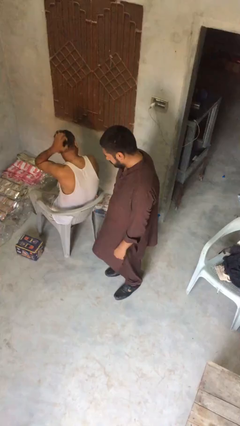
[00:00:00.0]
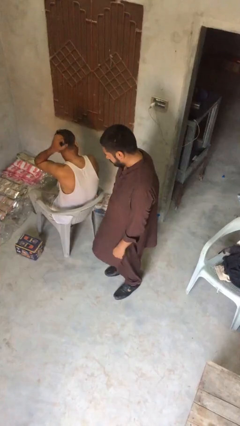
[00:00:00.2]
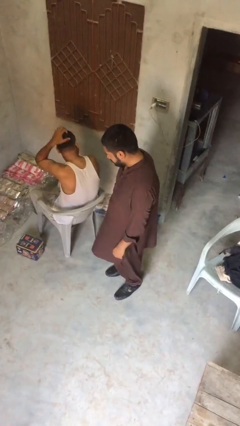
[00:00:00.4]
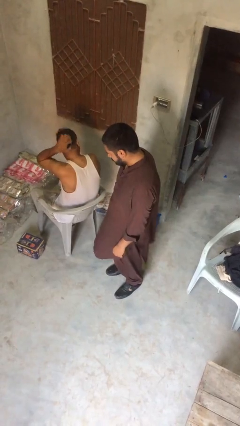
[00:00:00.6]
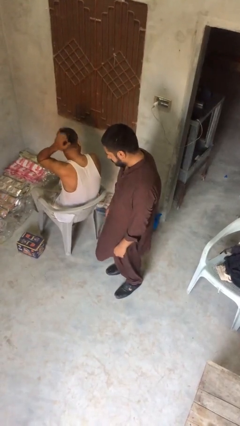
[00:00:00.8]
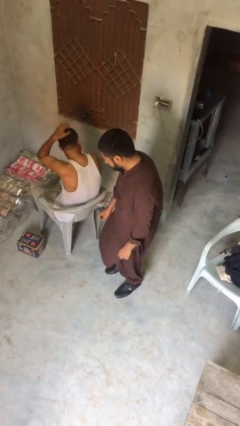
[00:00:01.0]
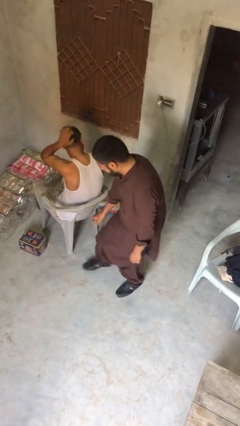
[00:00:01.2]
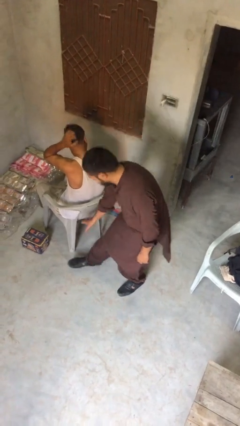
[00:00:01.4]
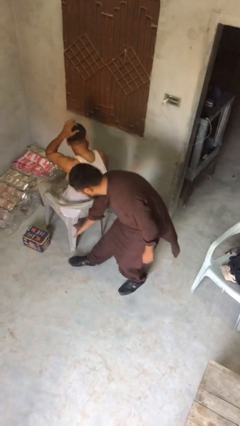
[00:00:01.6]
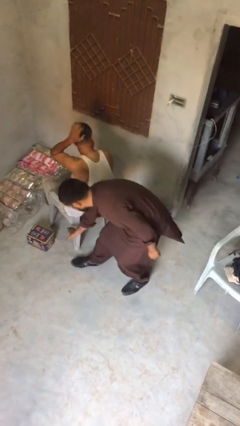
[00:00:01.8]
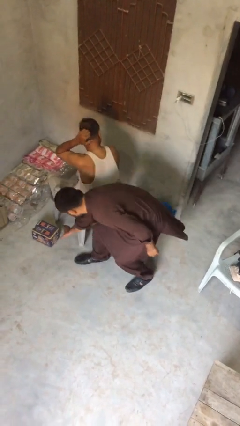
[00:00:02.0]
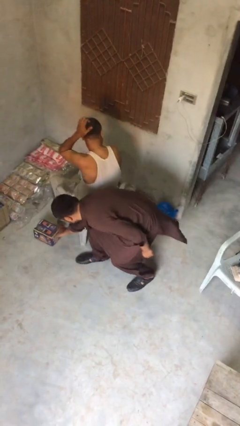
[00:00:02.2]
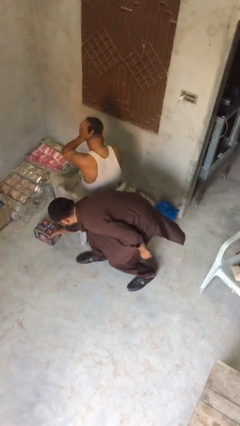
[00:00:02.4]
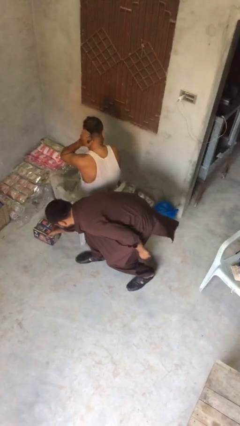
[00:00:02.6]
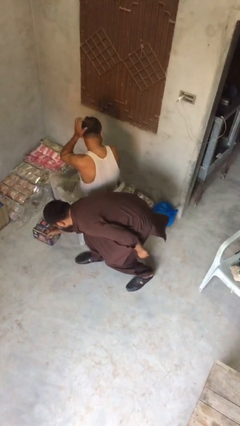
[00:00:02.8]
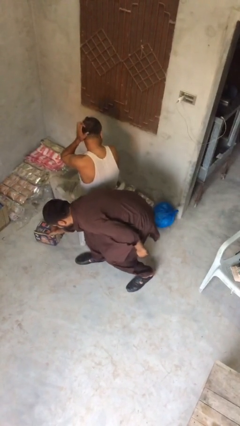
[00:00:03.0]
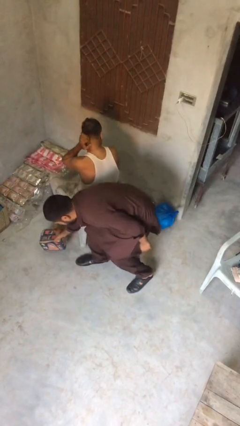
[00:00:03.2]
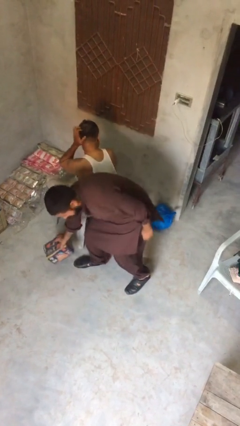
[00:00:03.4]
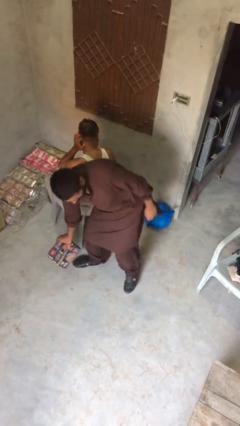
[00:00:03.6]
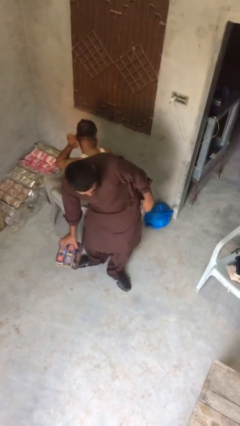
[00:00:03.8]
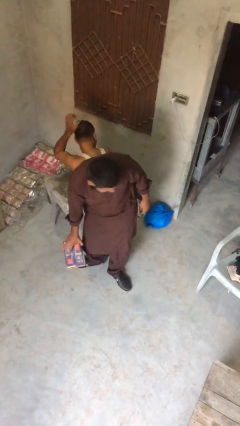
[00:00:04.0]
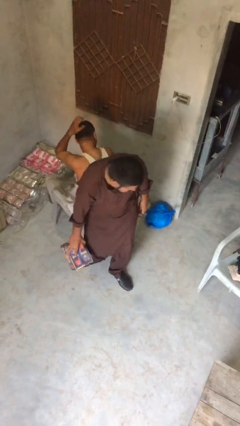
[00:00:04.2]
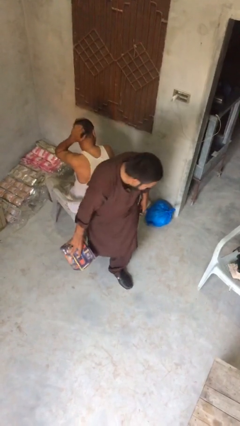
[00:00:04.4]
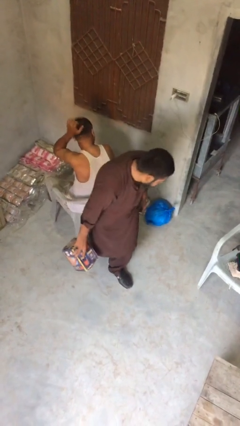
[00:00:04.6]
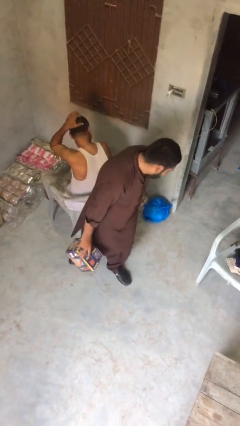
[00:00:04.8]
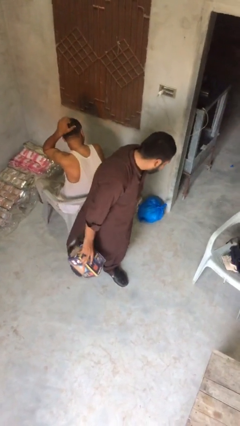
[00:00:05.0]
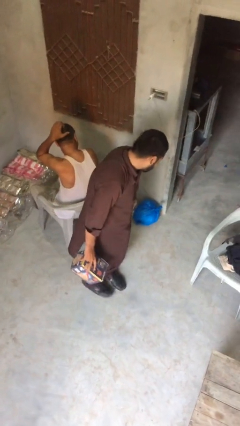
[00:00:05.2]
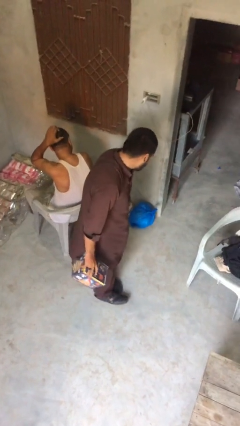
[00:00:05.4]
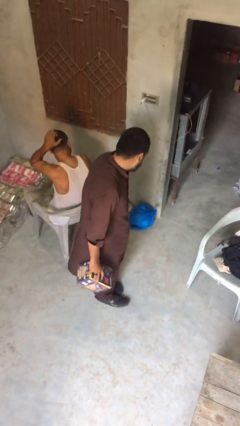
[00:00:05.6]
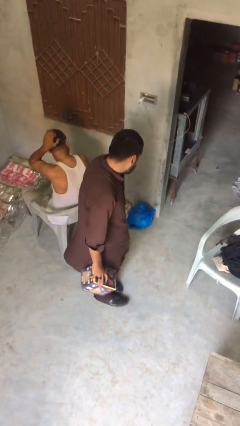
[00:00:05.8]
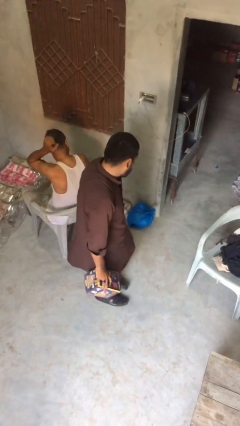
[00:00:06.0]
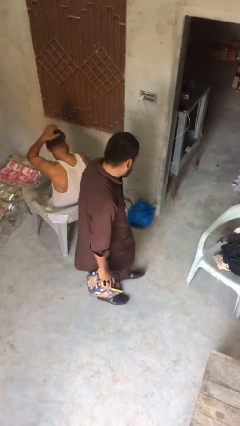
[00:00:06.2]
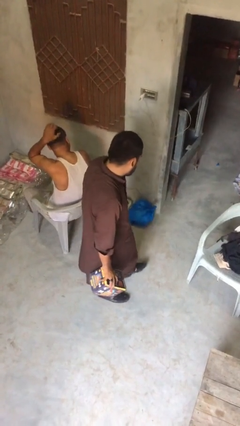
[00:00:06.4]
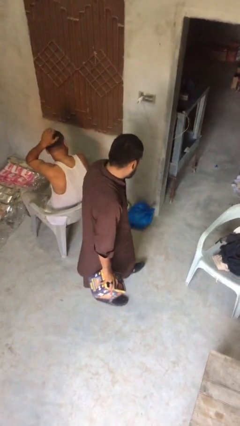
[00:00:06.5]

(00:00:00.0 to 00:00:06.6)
person steals object from person

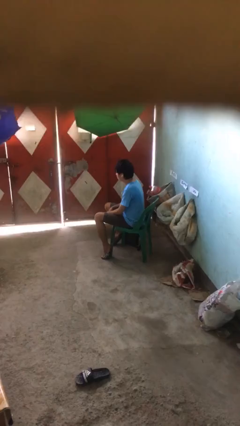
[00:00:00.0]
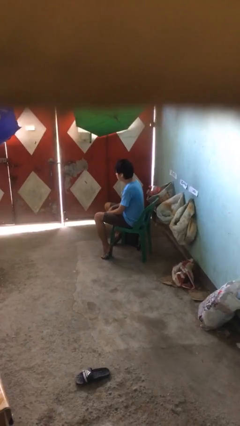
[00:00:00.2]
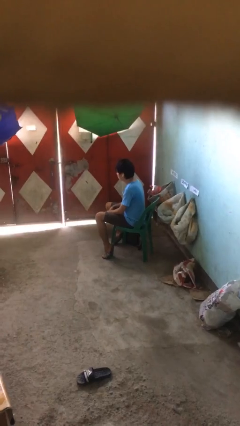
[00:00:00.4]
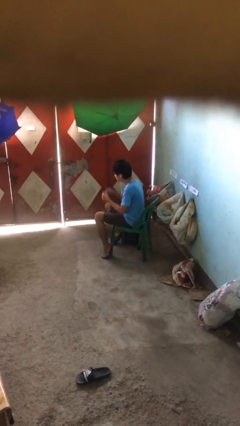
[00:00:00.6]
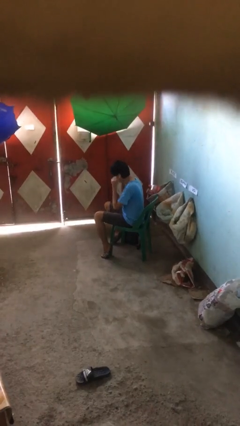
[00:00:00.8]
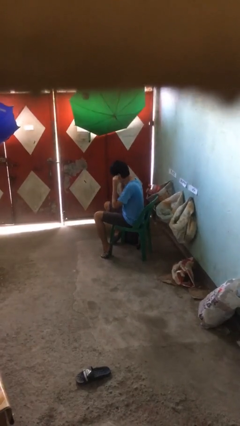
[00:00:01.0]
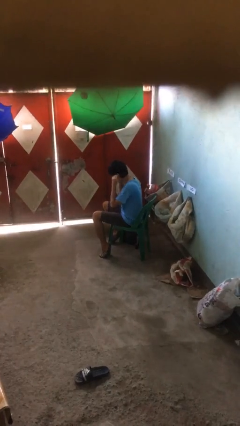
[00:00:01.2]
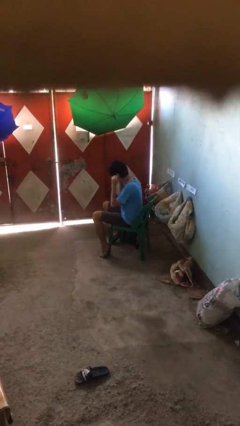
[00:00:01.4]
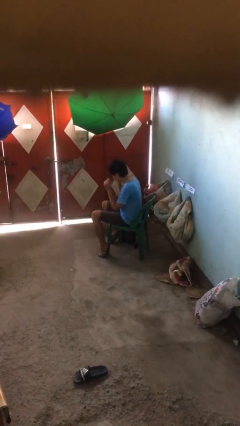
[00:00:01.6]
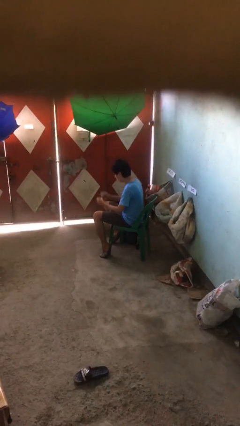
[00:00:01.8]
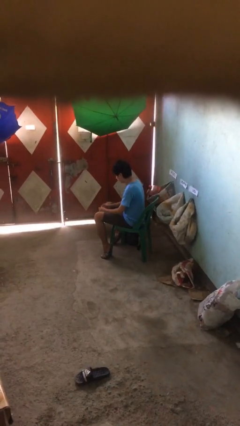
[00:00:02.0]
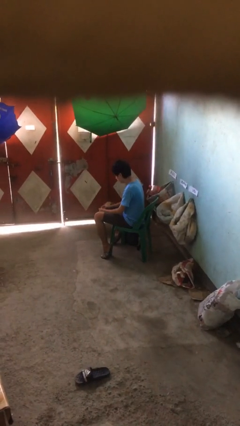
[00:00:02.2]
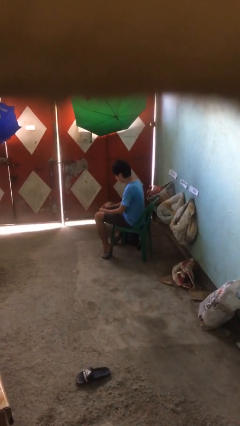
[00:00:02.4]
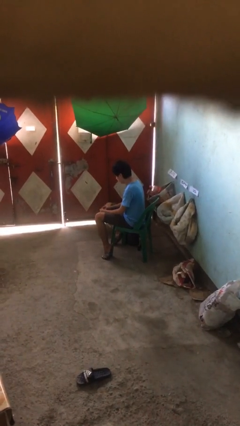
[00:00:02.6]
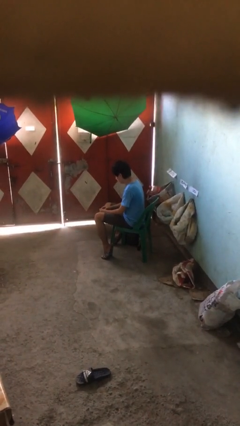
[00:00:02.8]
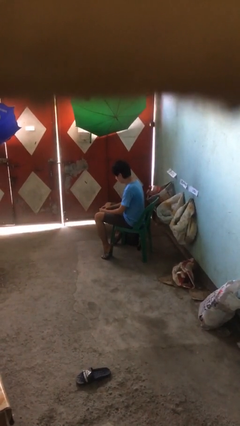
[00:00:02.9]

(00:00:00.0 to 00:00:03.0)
person takes off headphones

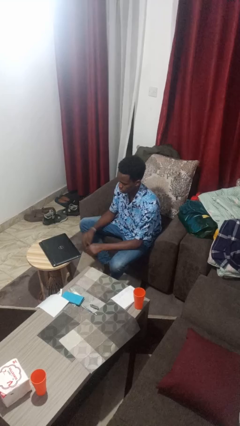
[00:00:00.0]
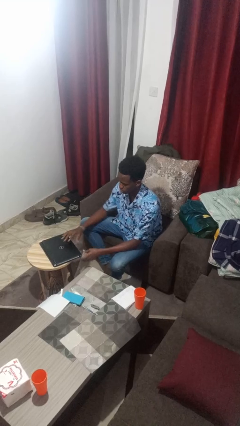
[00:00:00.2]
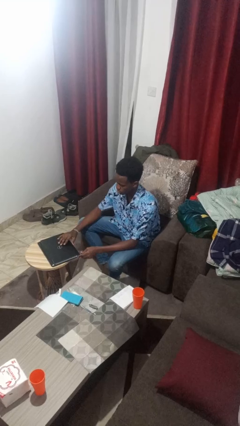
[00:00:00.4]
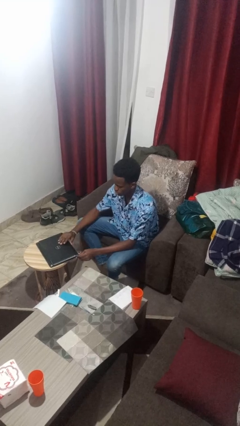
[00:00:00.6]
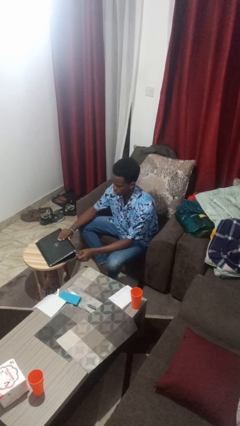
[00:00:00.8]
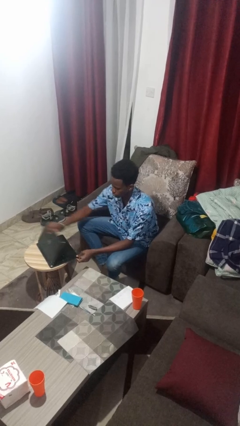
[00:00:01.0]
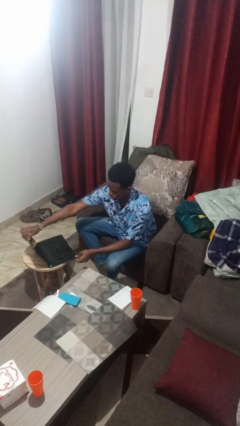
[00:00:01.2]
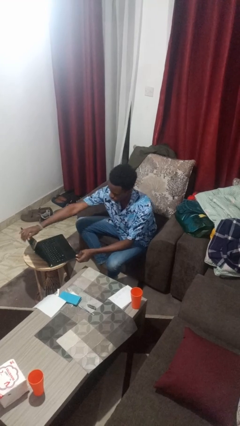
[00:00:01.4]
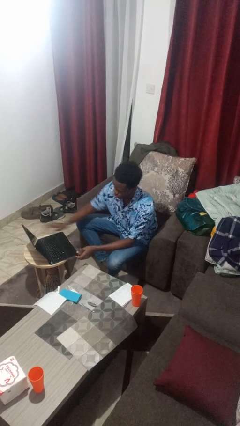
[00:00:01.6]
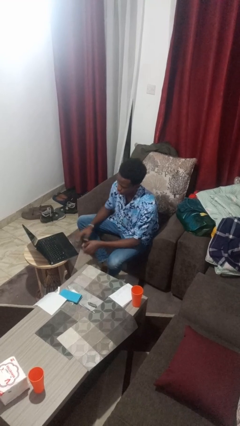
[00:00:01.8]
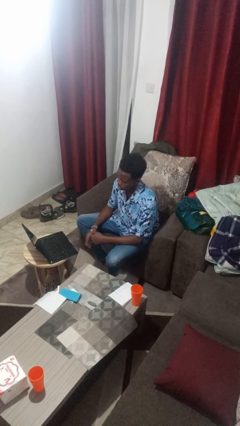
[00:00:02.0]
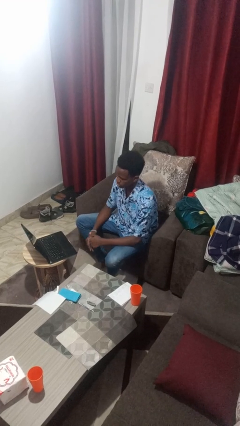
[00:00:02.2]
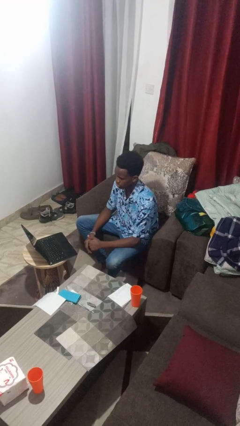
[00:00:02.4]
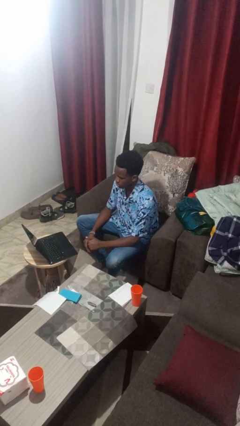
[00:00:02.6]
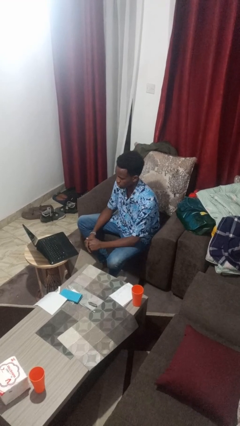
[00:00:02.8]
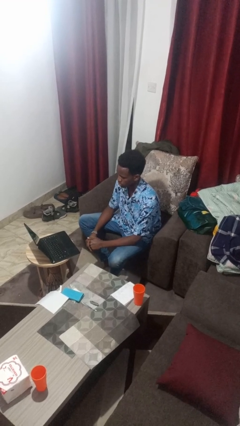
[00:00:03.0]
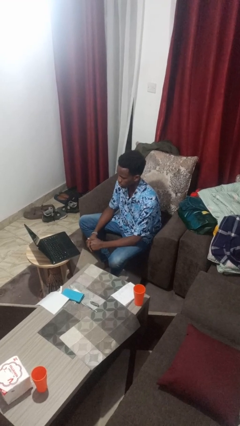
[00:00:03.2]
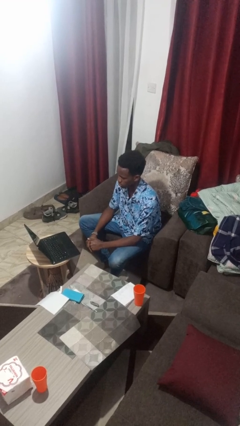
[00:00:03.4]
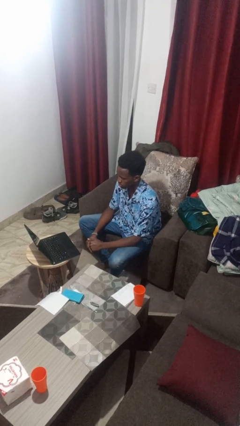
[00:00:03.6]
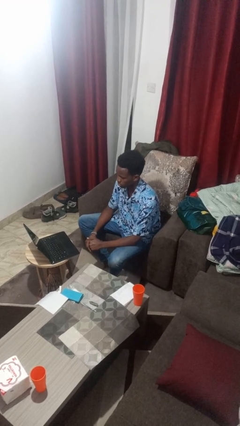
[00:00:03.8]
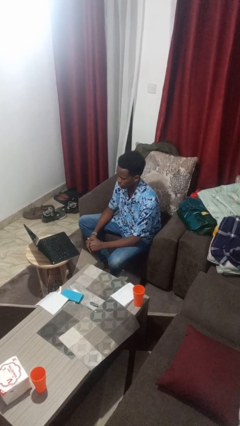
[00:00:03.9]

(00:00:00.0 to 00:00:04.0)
person opens laptop

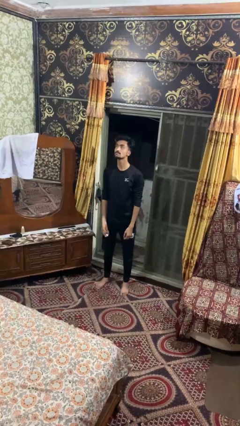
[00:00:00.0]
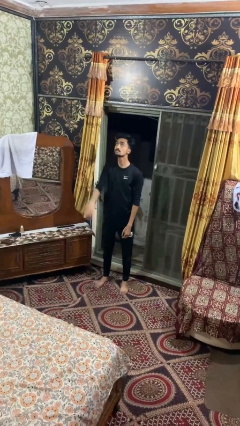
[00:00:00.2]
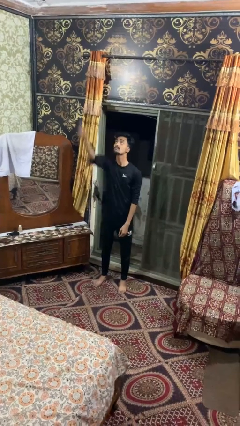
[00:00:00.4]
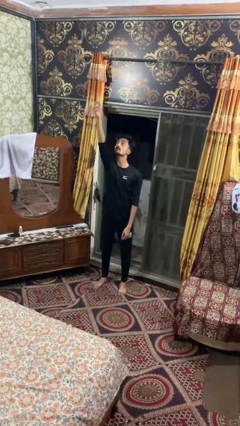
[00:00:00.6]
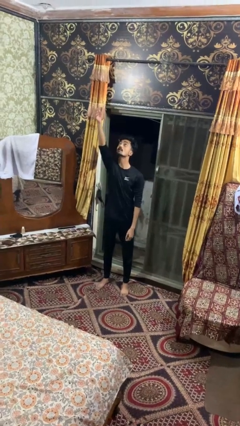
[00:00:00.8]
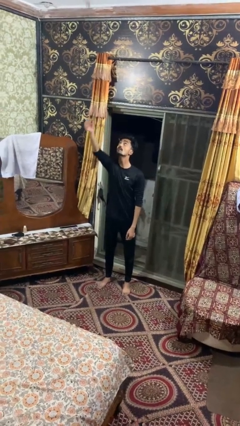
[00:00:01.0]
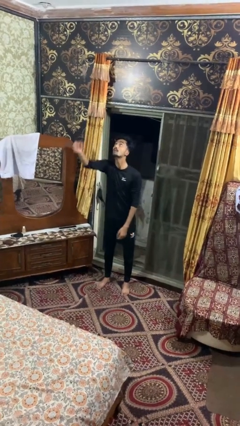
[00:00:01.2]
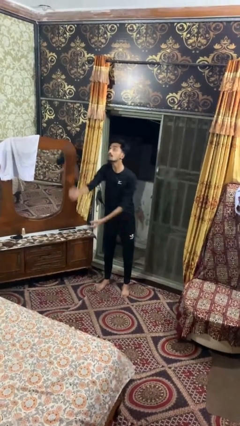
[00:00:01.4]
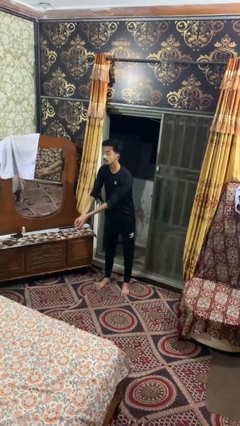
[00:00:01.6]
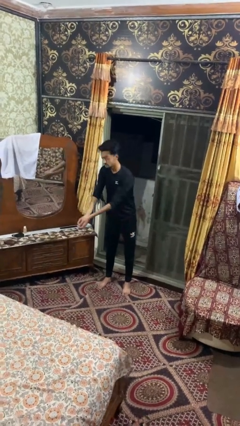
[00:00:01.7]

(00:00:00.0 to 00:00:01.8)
person drops object

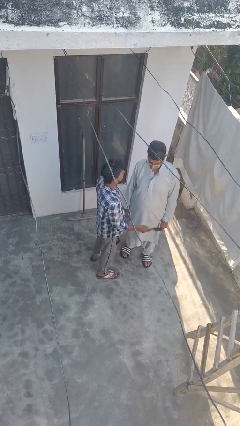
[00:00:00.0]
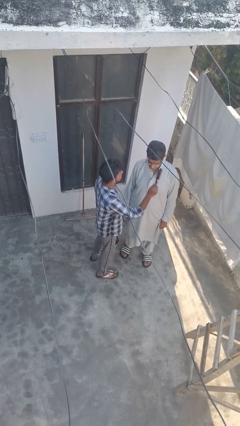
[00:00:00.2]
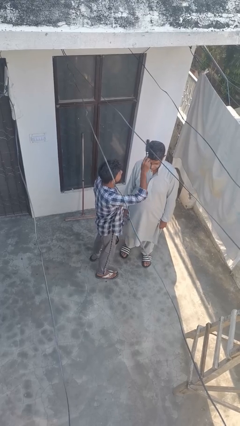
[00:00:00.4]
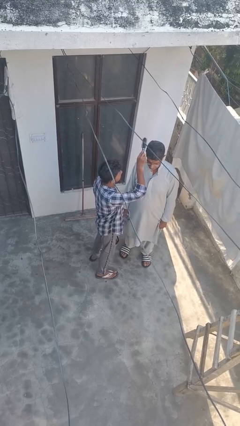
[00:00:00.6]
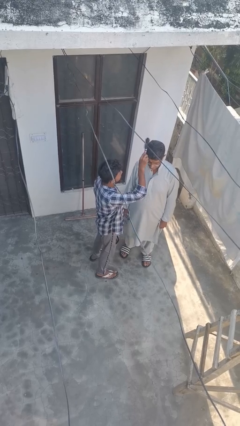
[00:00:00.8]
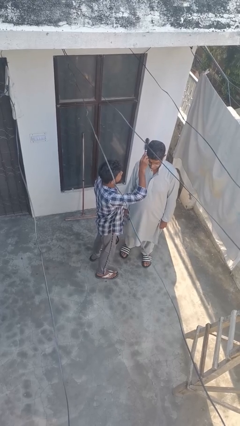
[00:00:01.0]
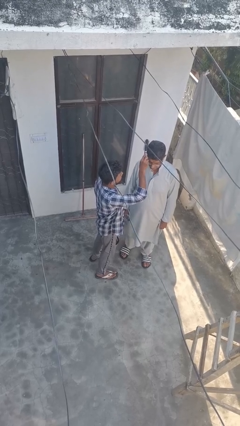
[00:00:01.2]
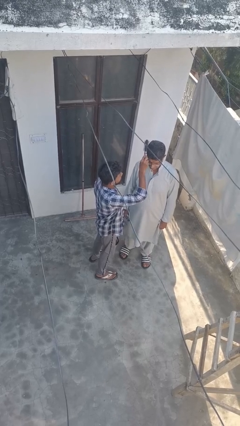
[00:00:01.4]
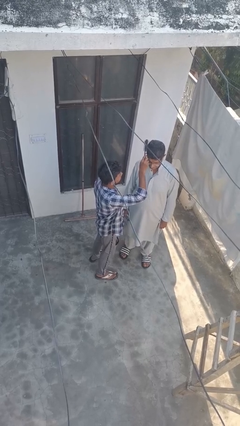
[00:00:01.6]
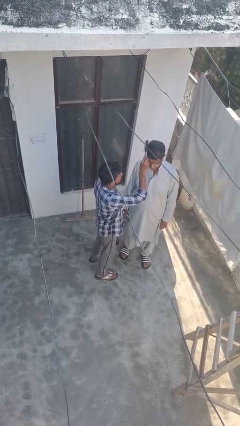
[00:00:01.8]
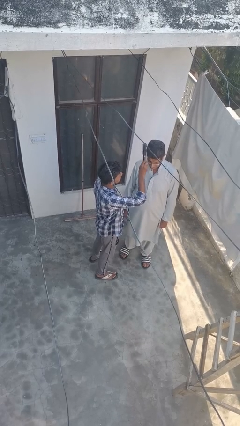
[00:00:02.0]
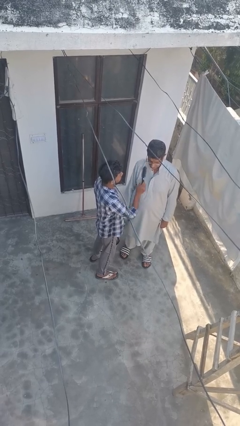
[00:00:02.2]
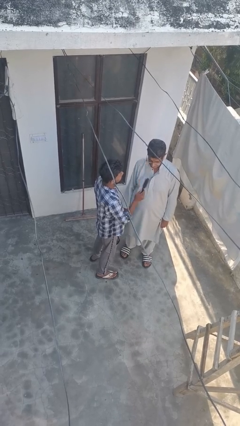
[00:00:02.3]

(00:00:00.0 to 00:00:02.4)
person brushes hair of person
